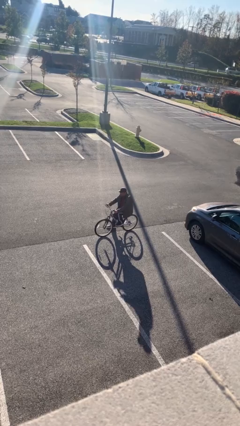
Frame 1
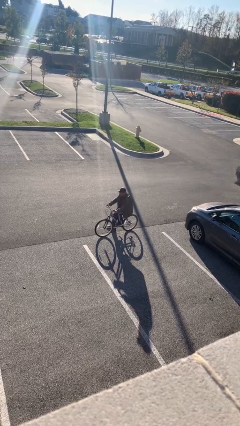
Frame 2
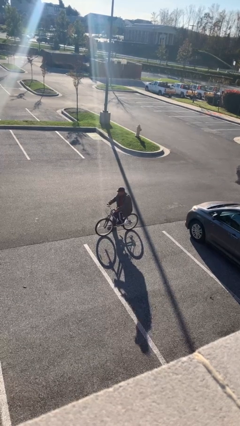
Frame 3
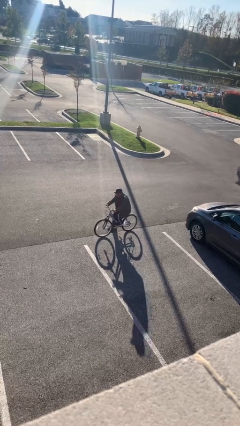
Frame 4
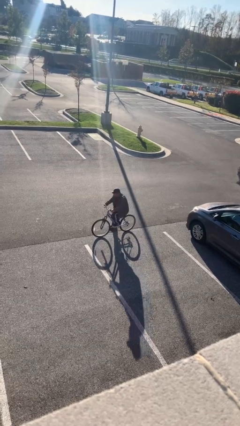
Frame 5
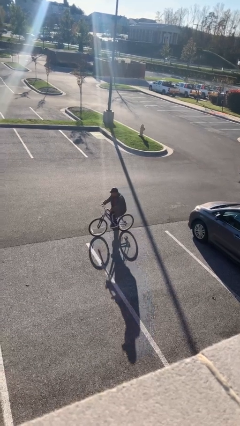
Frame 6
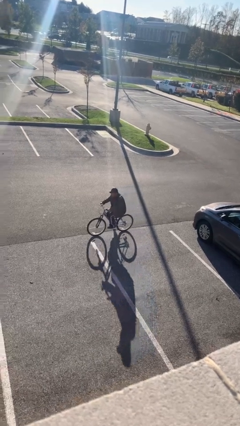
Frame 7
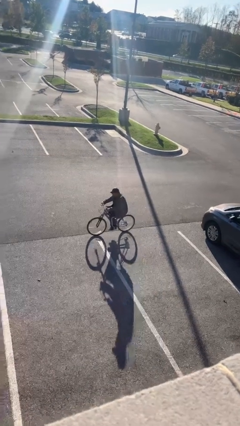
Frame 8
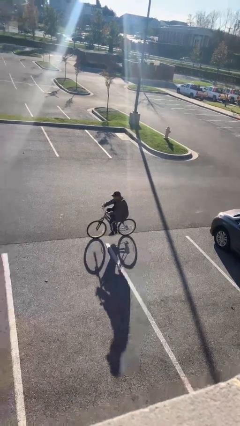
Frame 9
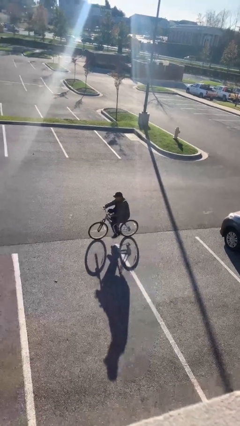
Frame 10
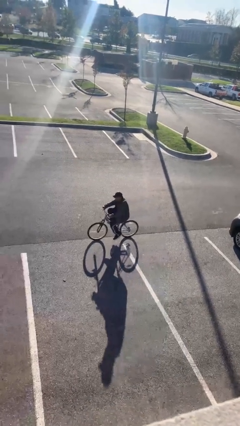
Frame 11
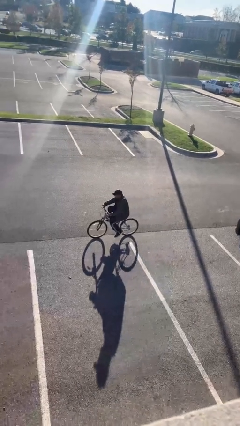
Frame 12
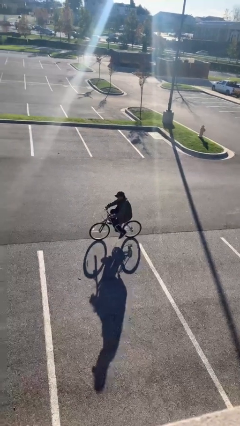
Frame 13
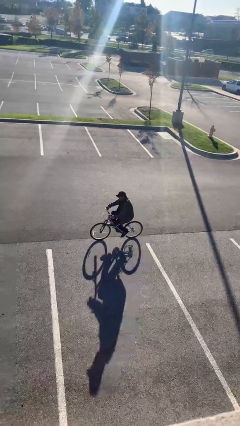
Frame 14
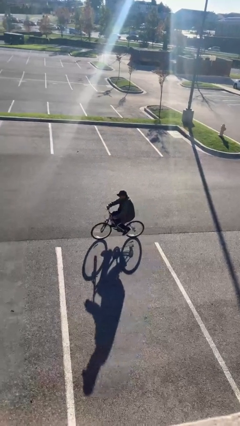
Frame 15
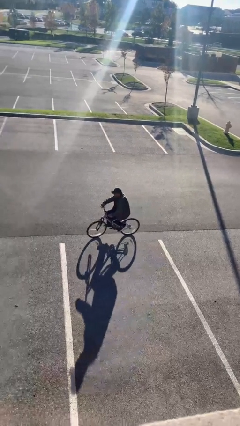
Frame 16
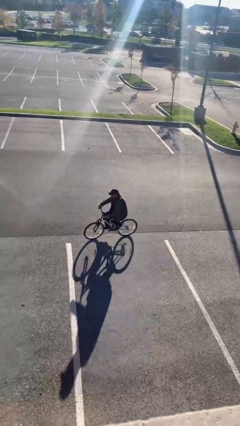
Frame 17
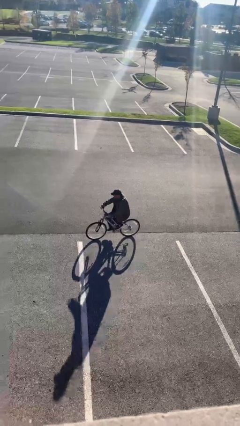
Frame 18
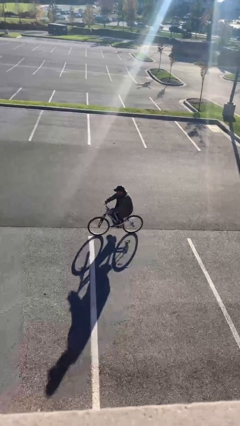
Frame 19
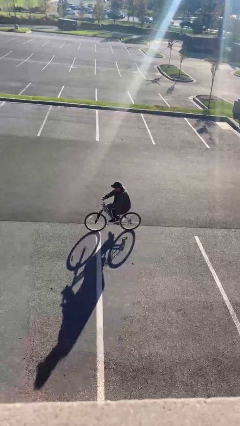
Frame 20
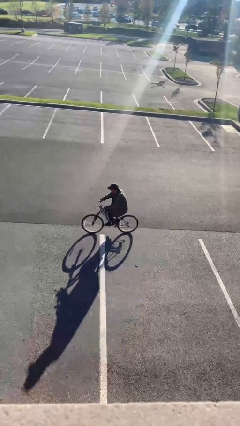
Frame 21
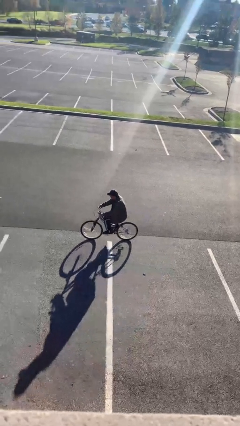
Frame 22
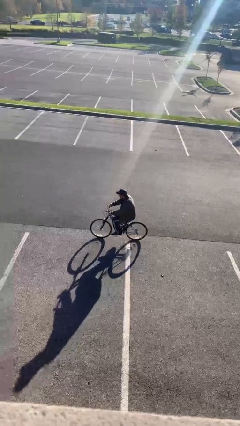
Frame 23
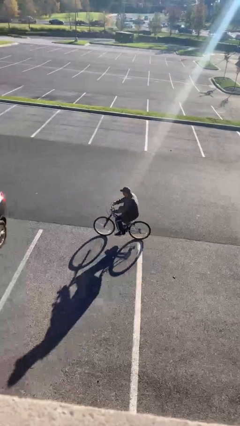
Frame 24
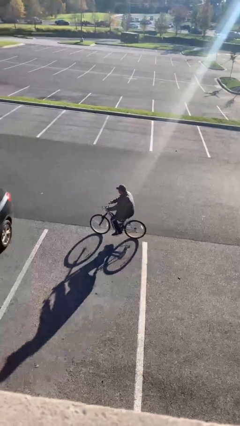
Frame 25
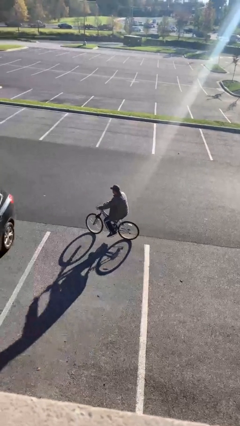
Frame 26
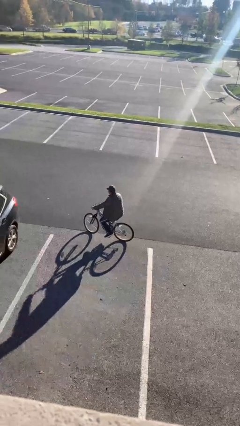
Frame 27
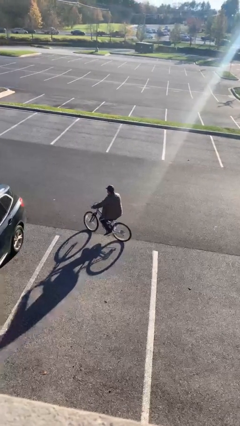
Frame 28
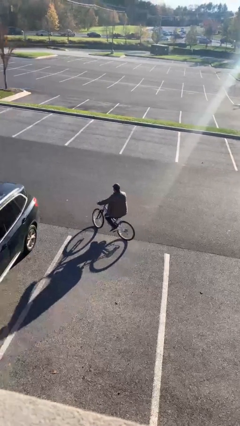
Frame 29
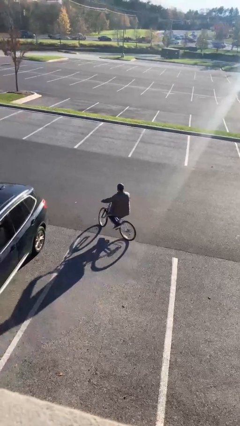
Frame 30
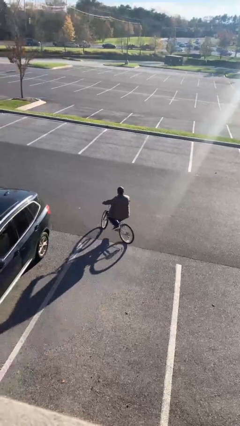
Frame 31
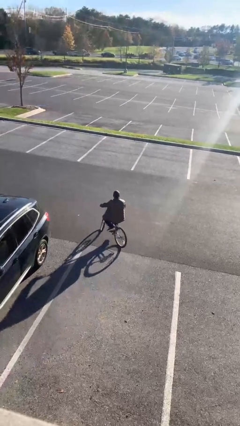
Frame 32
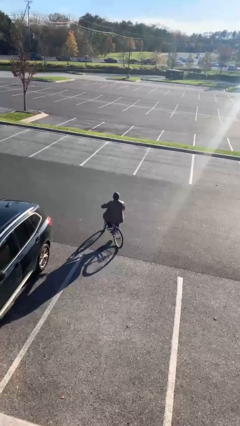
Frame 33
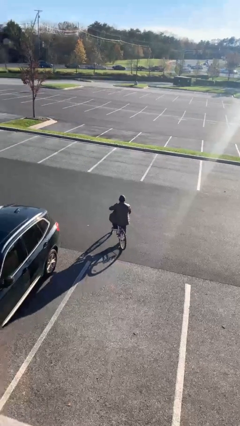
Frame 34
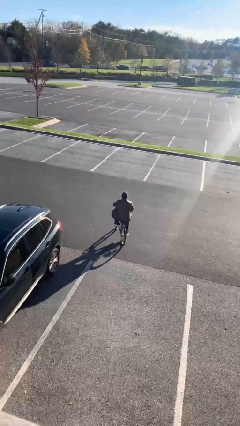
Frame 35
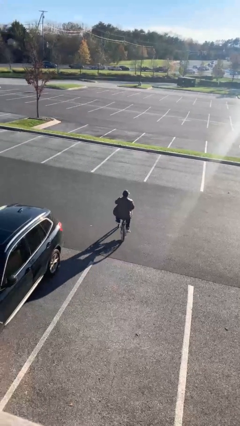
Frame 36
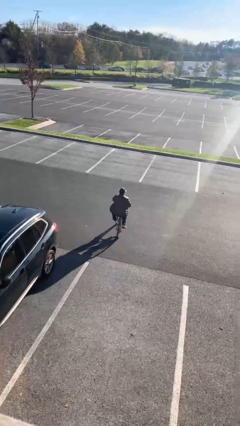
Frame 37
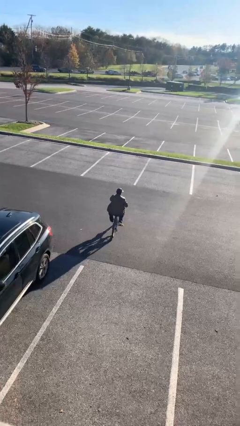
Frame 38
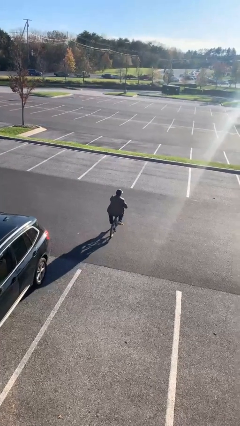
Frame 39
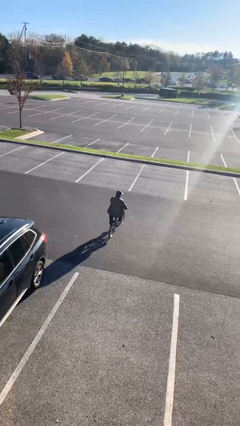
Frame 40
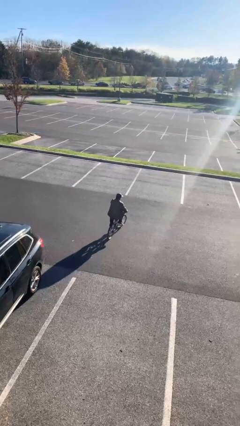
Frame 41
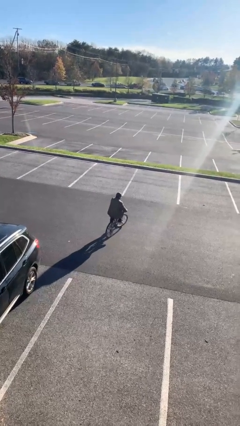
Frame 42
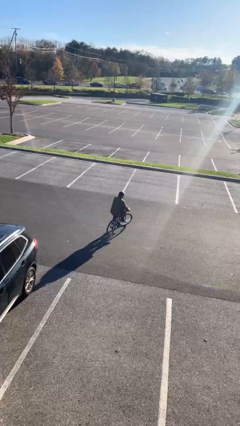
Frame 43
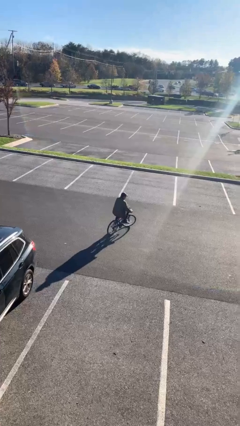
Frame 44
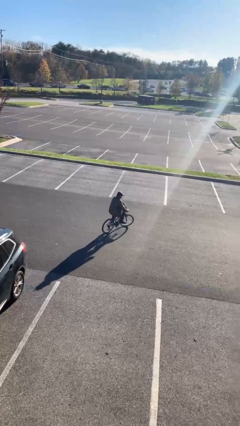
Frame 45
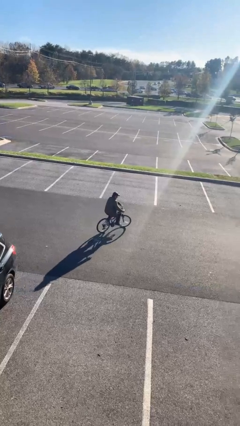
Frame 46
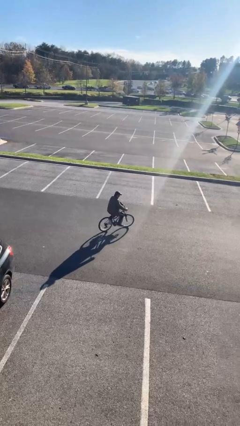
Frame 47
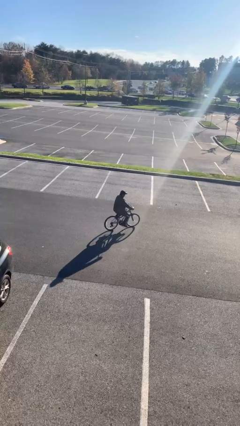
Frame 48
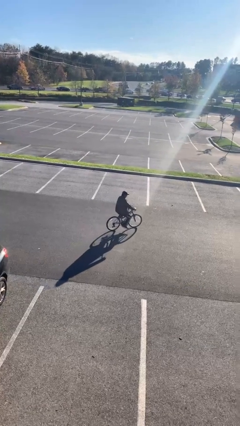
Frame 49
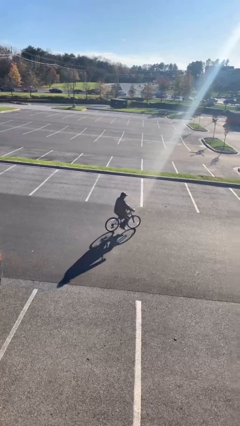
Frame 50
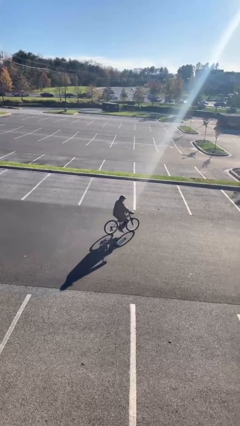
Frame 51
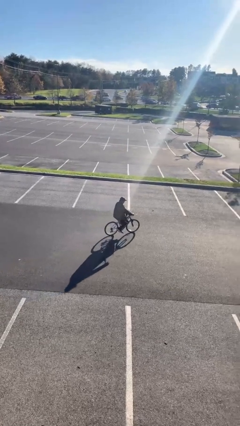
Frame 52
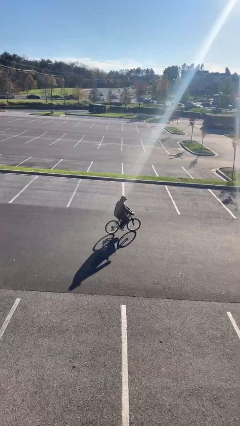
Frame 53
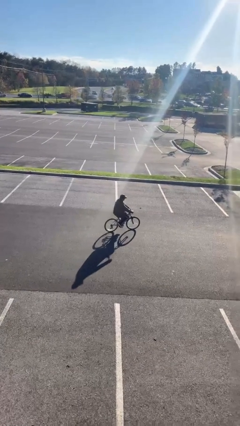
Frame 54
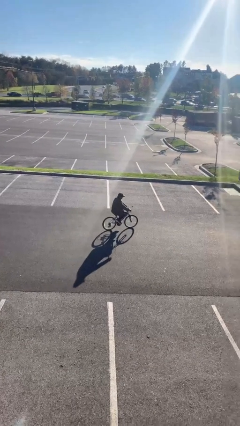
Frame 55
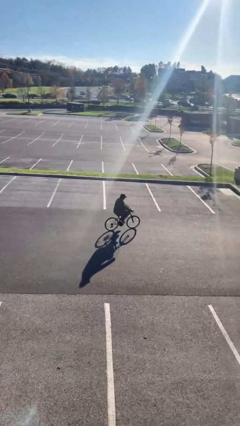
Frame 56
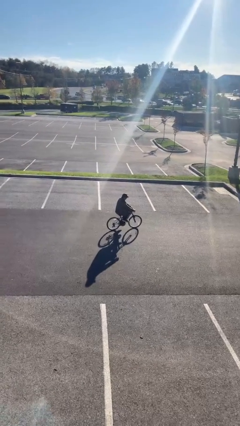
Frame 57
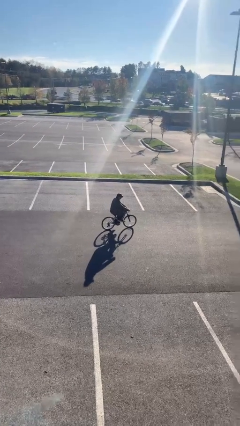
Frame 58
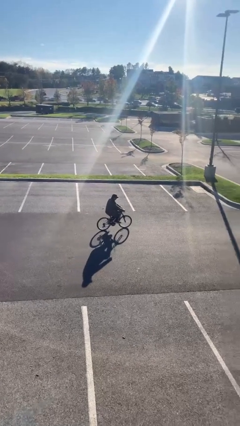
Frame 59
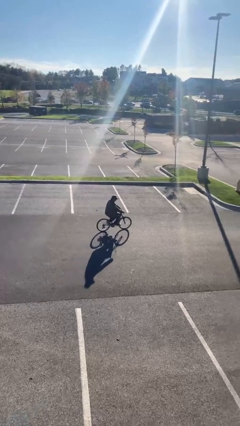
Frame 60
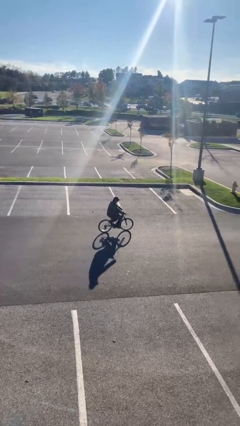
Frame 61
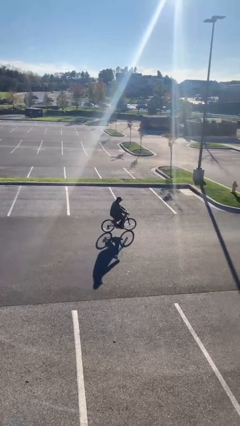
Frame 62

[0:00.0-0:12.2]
person rides bicycle

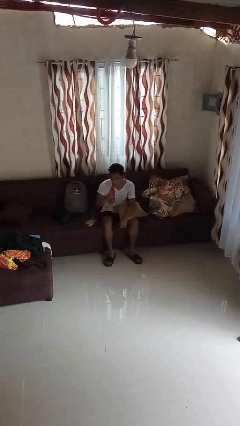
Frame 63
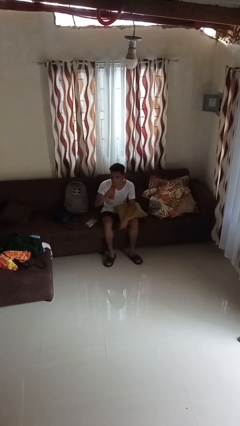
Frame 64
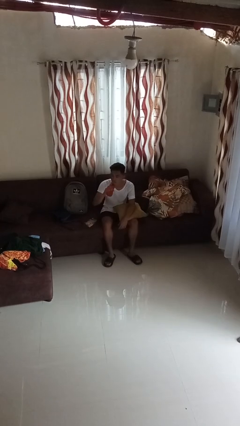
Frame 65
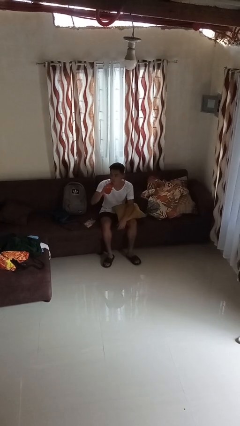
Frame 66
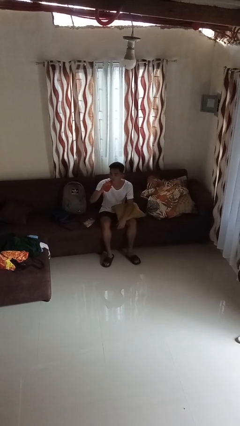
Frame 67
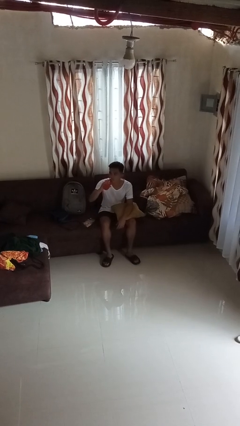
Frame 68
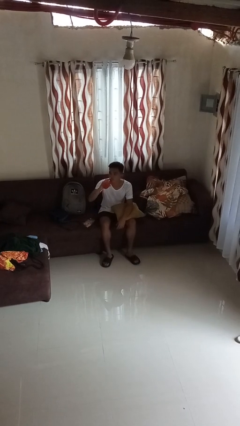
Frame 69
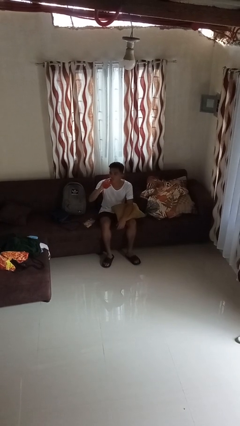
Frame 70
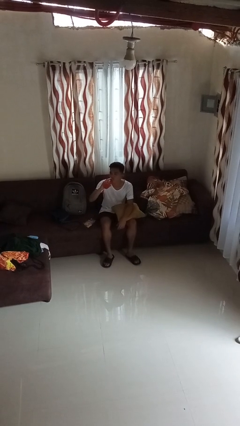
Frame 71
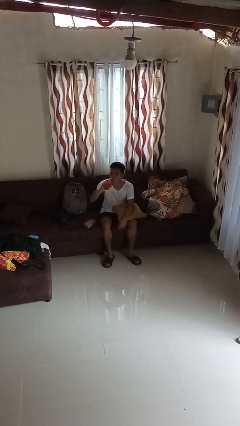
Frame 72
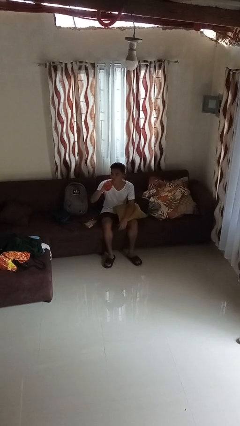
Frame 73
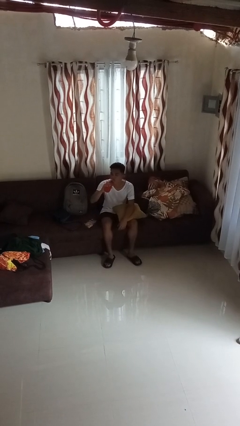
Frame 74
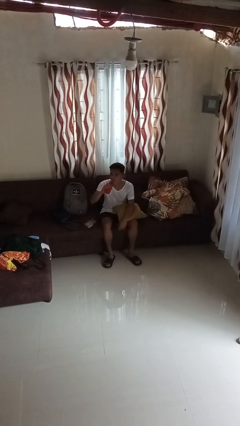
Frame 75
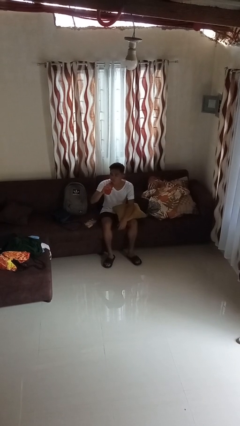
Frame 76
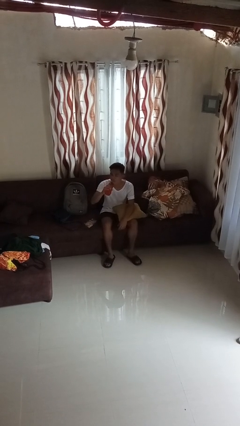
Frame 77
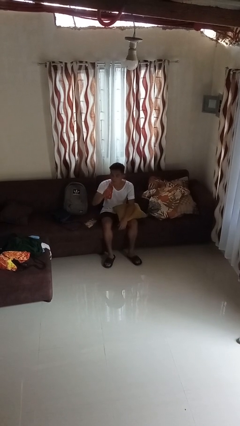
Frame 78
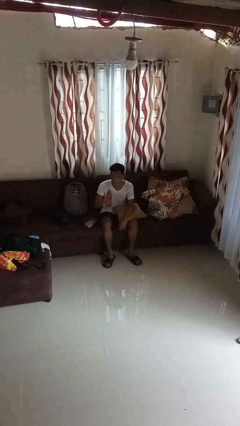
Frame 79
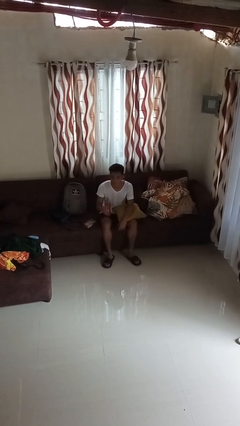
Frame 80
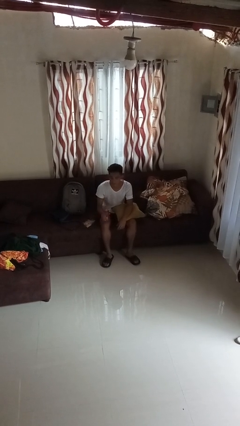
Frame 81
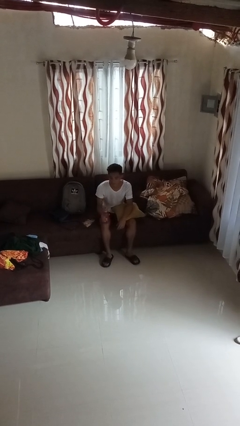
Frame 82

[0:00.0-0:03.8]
person drinks from bottle

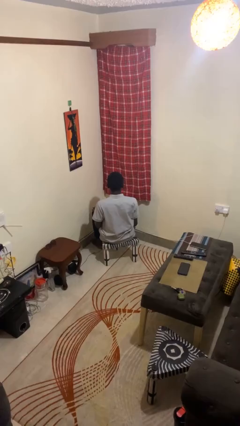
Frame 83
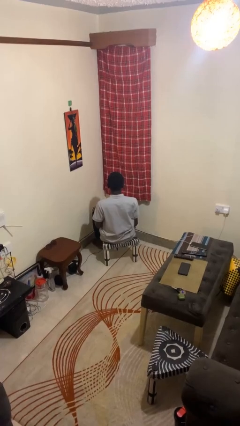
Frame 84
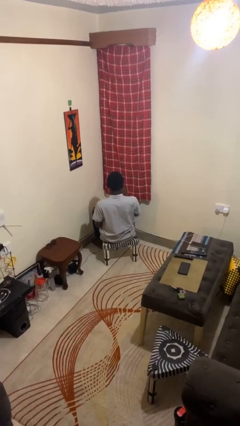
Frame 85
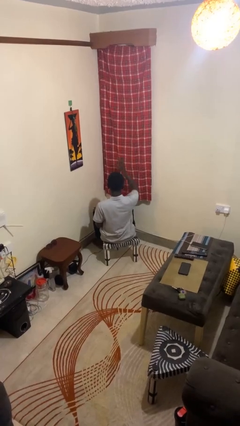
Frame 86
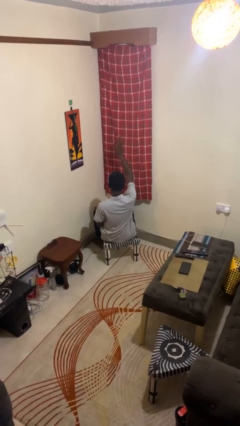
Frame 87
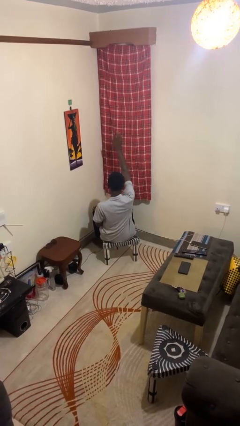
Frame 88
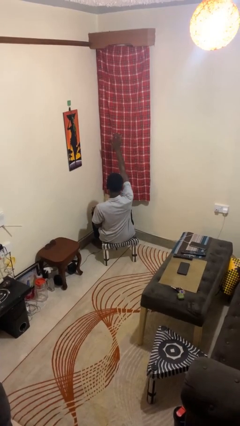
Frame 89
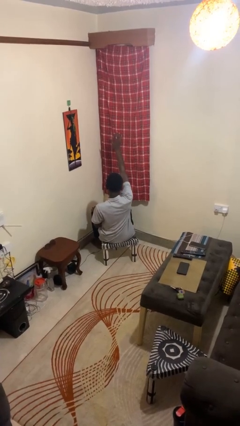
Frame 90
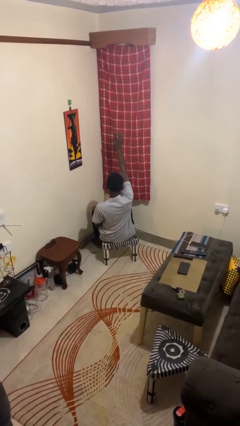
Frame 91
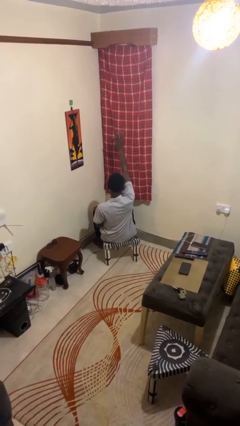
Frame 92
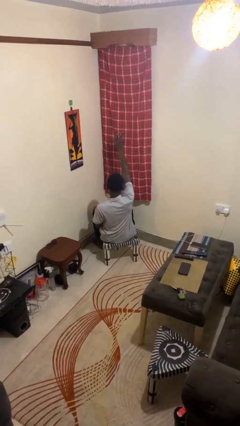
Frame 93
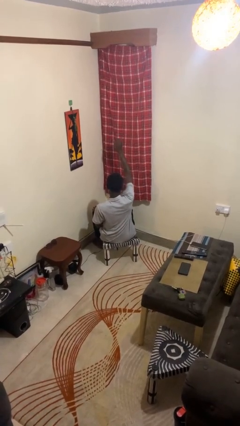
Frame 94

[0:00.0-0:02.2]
person gestures raise hand
